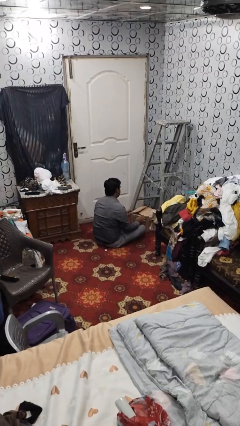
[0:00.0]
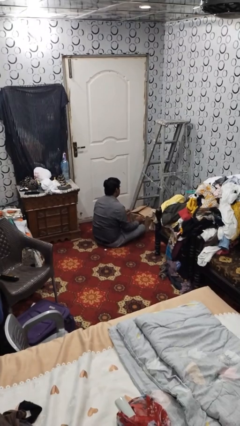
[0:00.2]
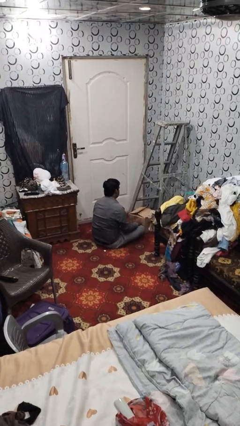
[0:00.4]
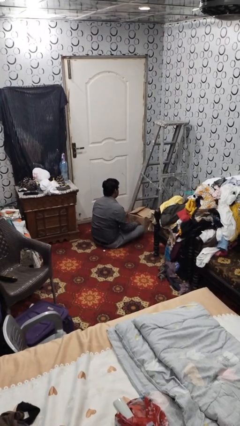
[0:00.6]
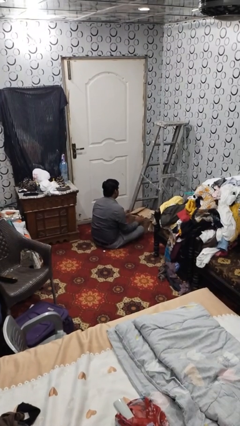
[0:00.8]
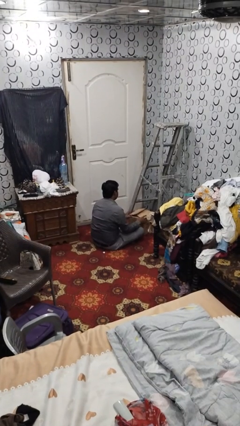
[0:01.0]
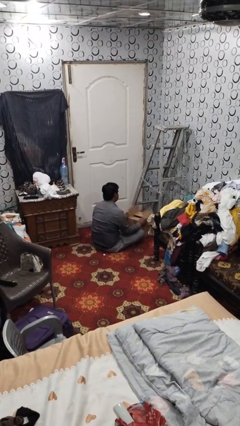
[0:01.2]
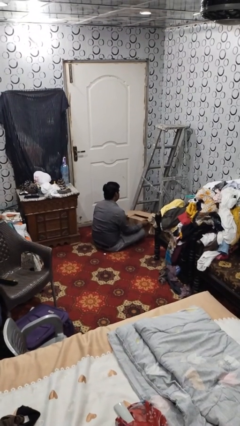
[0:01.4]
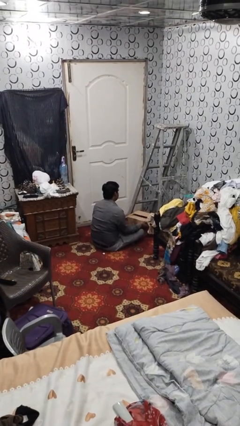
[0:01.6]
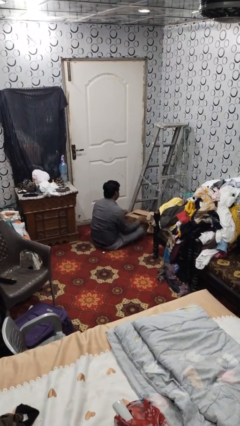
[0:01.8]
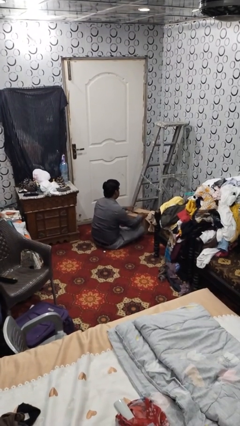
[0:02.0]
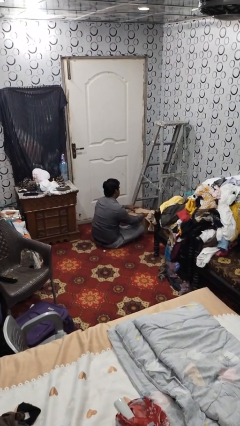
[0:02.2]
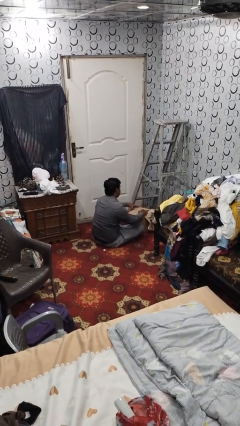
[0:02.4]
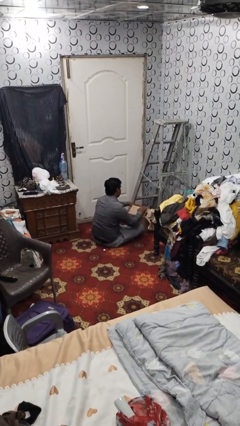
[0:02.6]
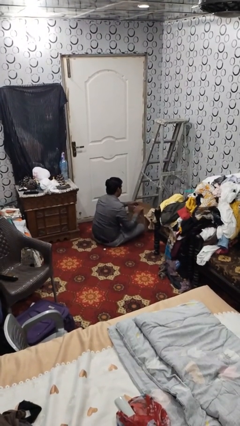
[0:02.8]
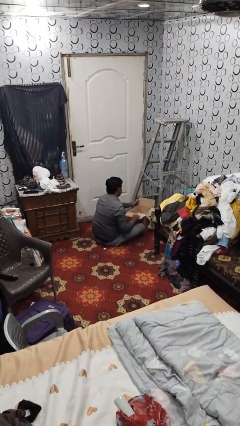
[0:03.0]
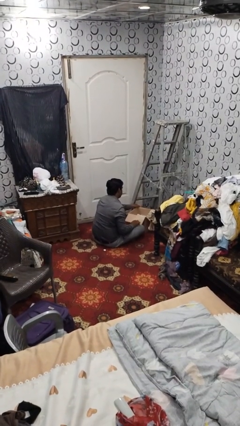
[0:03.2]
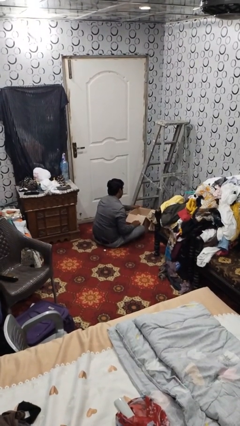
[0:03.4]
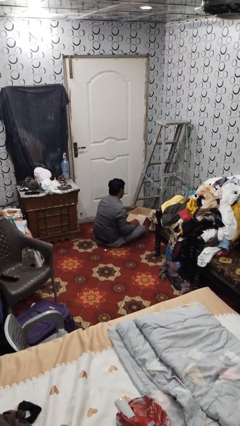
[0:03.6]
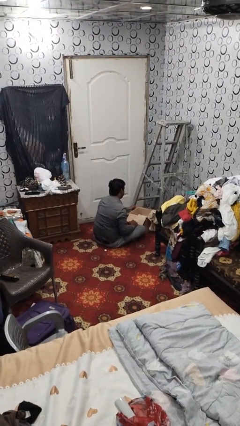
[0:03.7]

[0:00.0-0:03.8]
person opens box

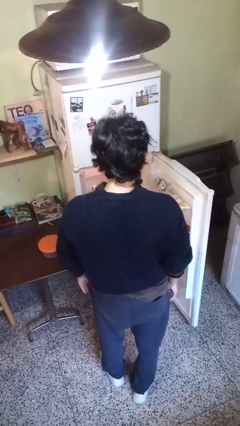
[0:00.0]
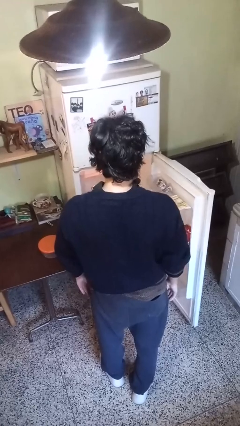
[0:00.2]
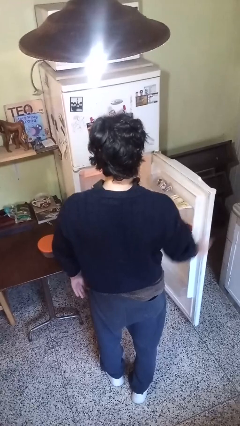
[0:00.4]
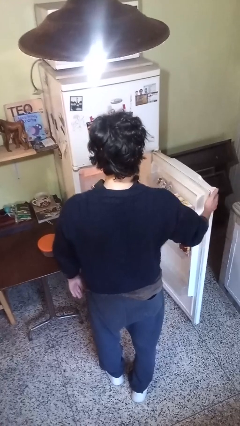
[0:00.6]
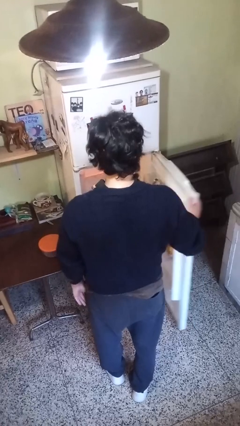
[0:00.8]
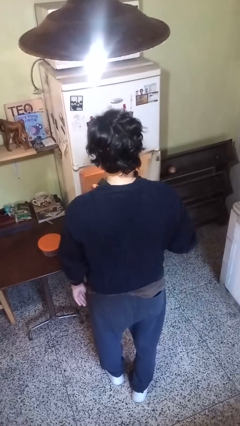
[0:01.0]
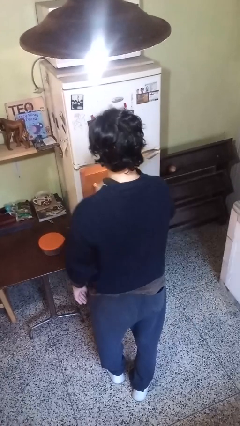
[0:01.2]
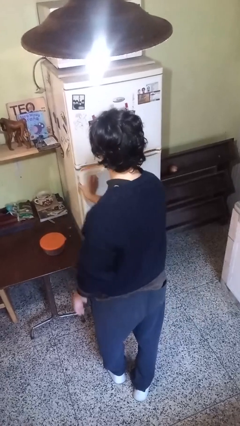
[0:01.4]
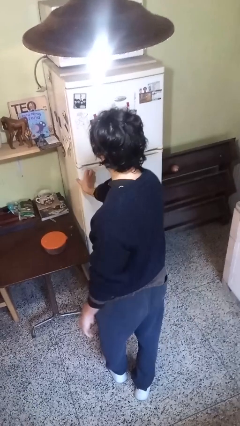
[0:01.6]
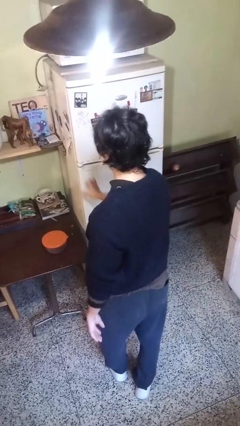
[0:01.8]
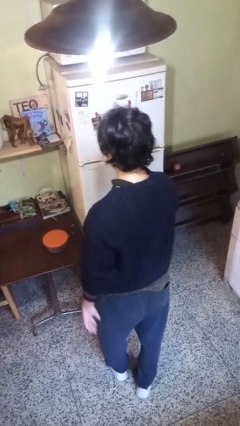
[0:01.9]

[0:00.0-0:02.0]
person closes refrigerator

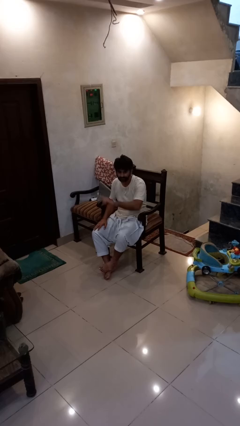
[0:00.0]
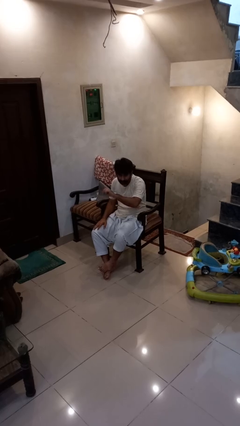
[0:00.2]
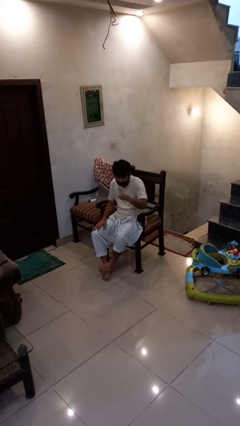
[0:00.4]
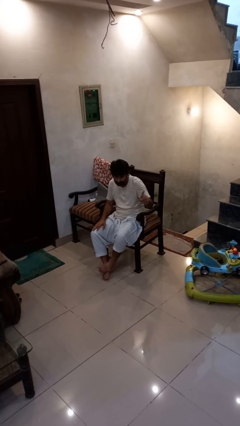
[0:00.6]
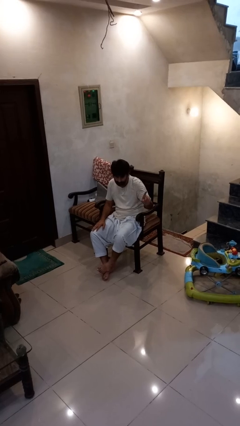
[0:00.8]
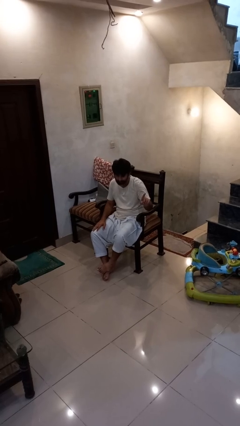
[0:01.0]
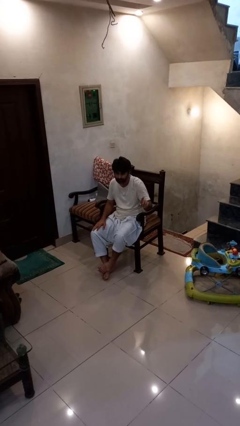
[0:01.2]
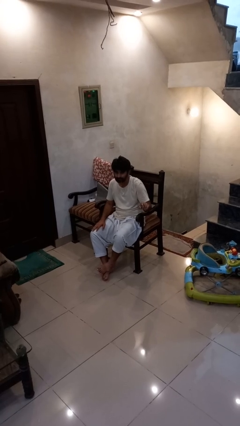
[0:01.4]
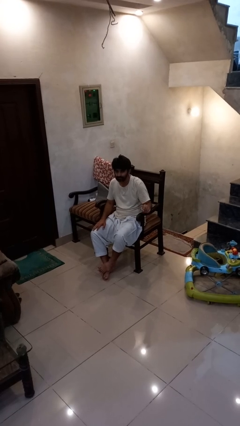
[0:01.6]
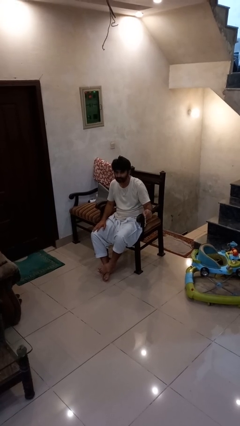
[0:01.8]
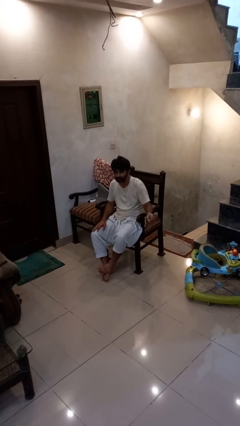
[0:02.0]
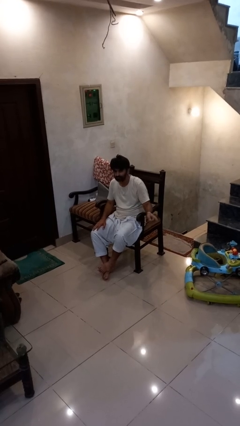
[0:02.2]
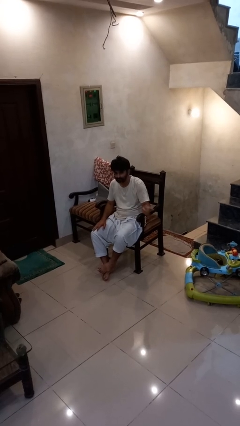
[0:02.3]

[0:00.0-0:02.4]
person gestures swipe left

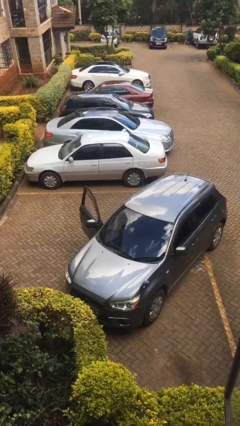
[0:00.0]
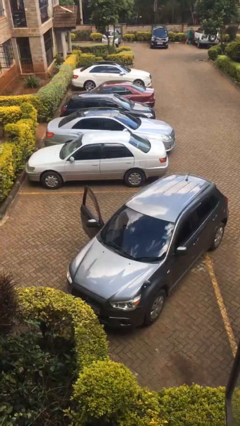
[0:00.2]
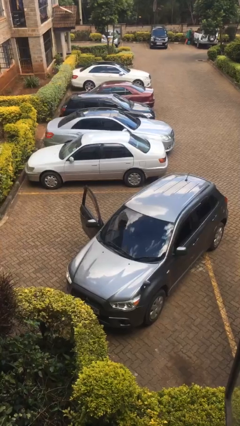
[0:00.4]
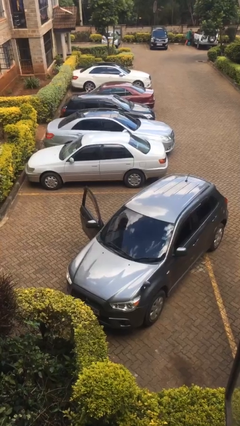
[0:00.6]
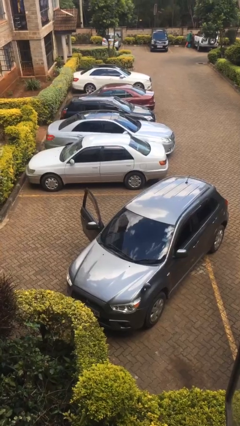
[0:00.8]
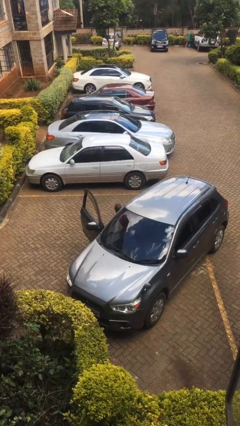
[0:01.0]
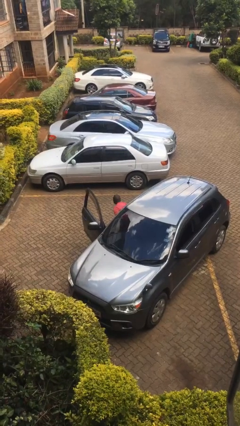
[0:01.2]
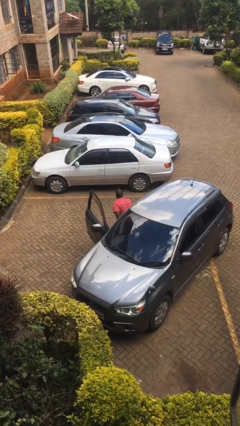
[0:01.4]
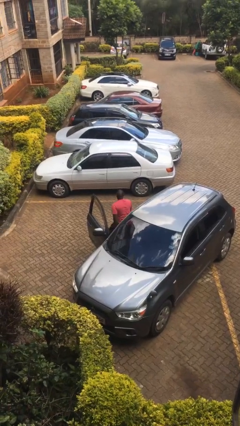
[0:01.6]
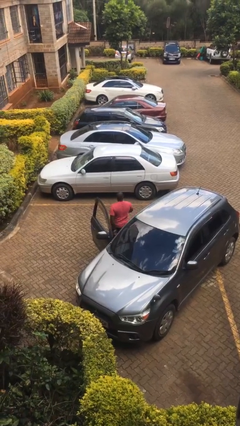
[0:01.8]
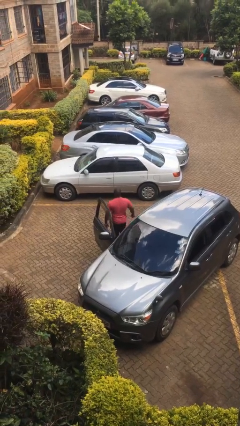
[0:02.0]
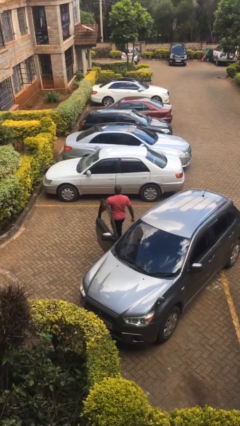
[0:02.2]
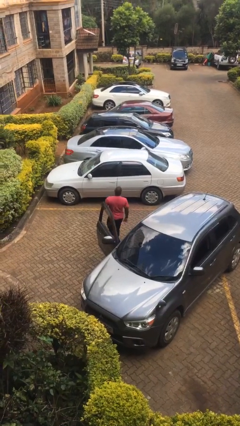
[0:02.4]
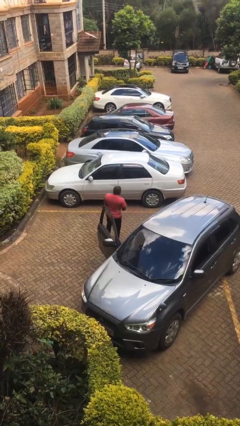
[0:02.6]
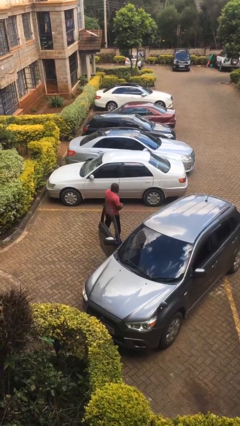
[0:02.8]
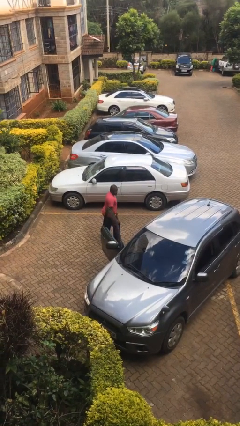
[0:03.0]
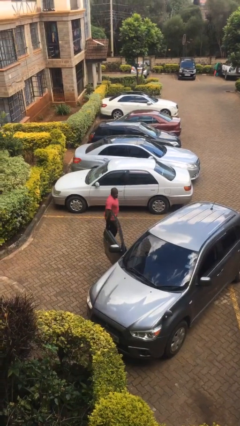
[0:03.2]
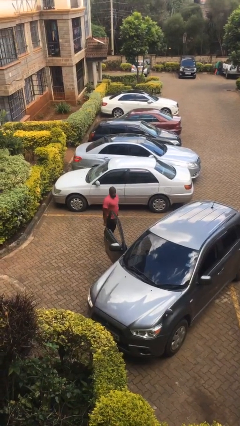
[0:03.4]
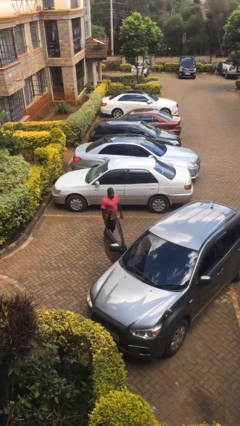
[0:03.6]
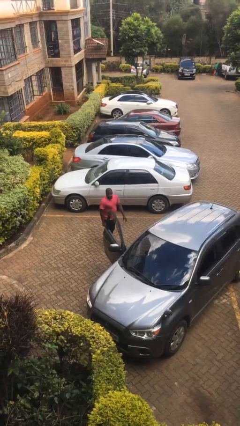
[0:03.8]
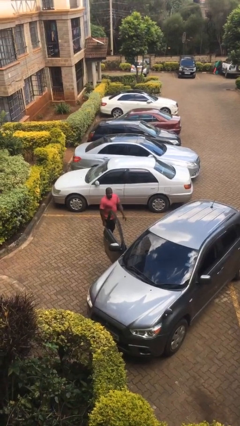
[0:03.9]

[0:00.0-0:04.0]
person exits car

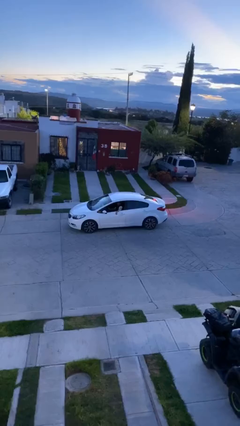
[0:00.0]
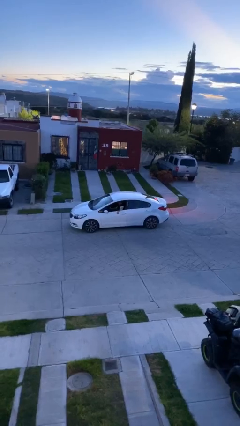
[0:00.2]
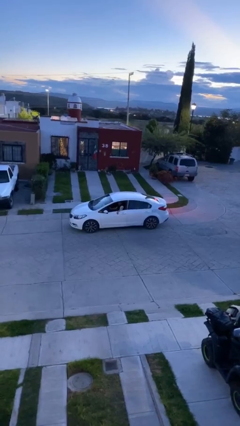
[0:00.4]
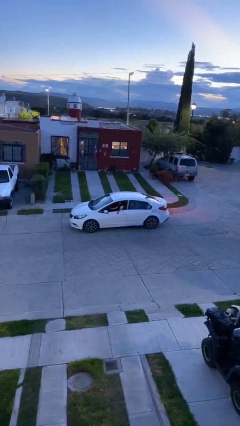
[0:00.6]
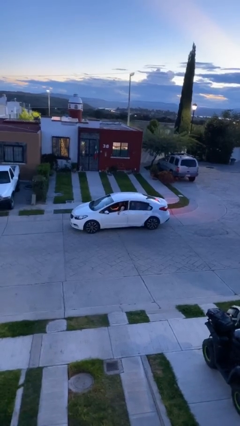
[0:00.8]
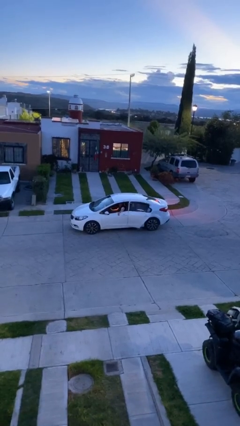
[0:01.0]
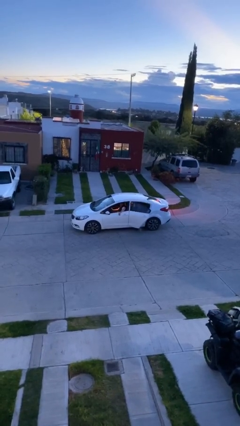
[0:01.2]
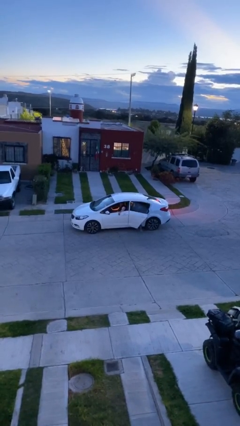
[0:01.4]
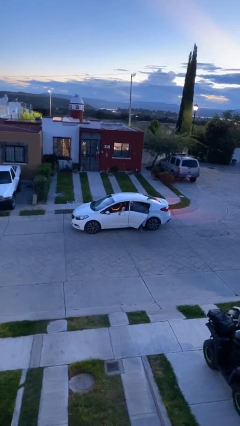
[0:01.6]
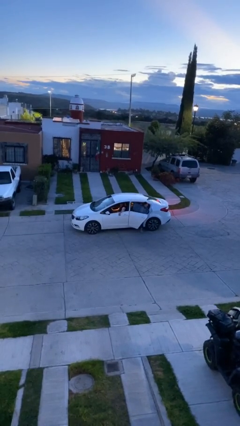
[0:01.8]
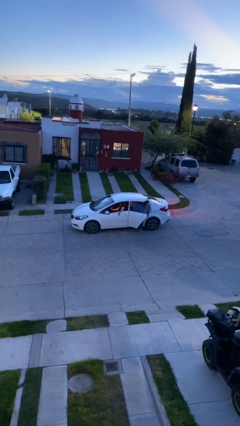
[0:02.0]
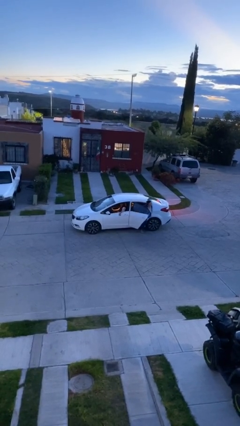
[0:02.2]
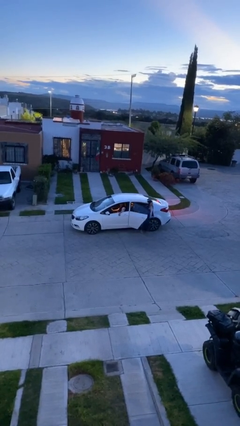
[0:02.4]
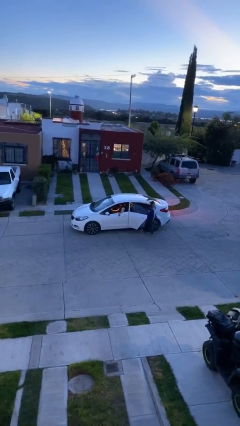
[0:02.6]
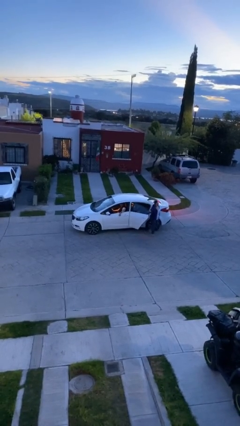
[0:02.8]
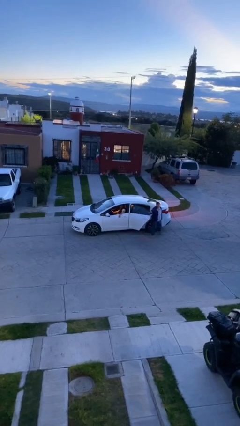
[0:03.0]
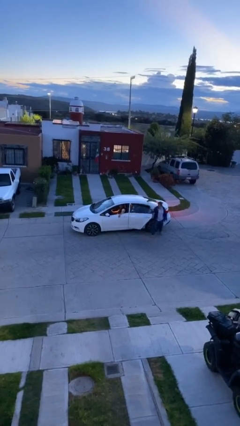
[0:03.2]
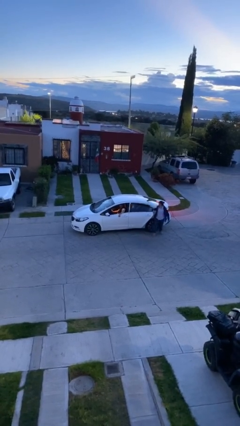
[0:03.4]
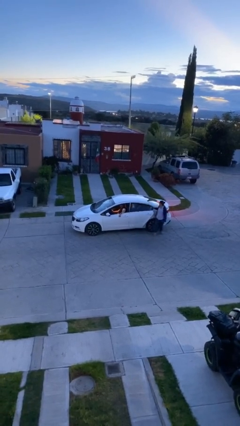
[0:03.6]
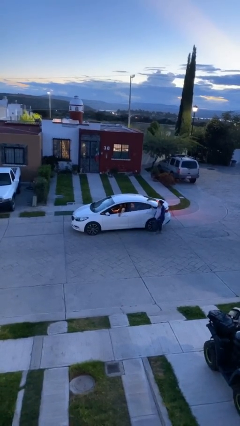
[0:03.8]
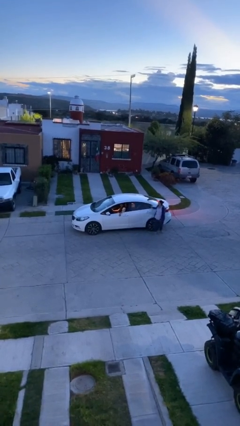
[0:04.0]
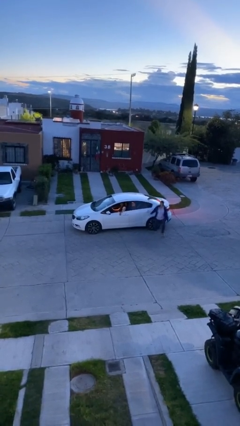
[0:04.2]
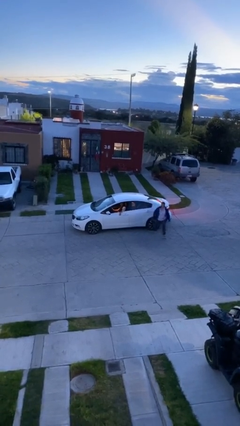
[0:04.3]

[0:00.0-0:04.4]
car drops off person

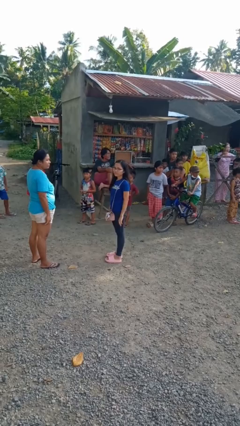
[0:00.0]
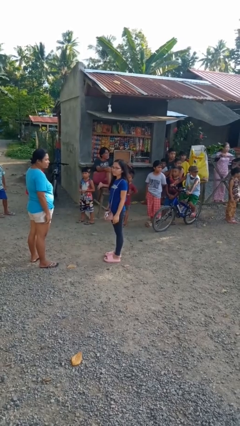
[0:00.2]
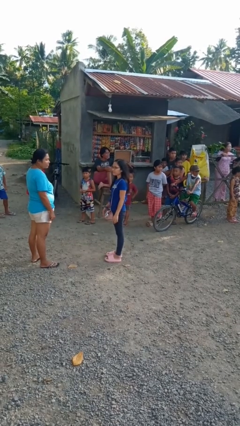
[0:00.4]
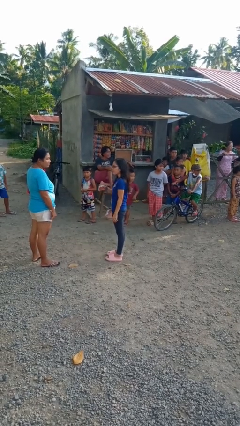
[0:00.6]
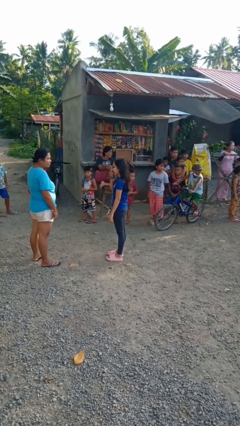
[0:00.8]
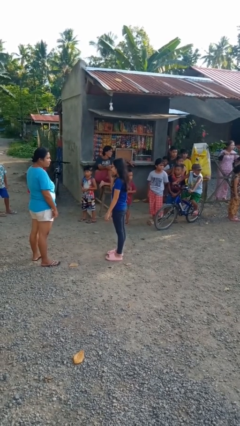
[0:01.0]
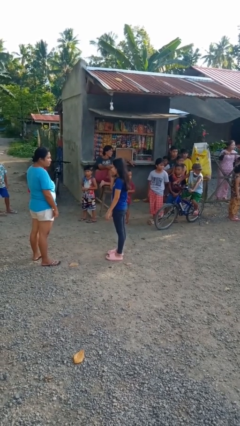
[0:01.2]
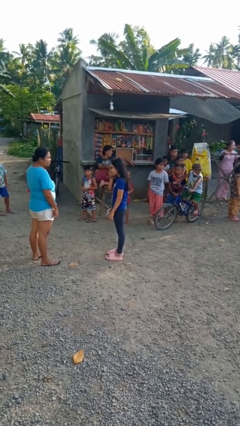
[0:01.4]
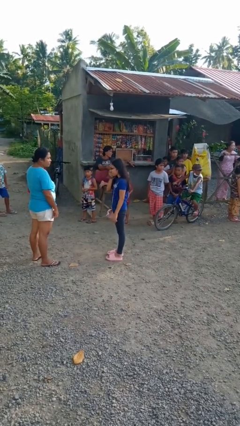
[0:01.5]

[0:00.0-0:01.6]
person laughs with person
